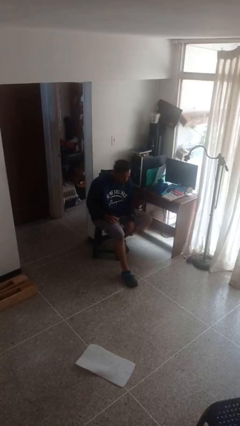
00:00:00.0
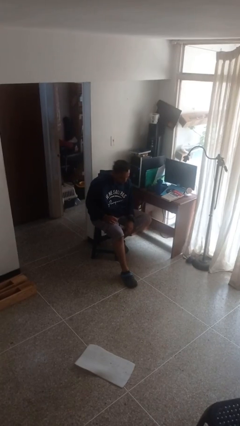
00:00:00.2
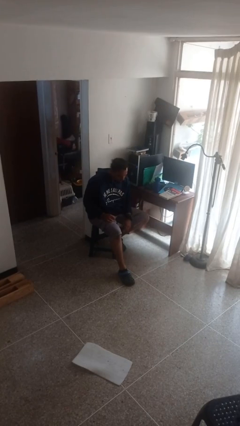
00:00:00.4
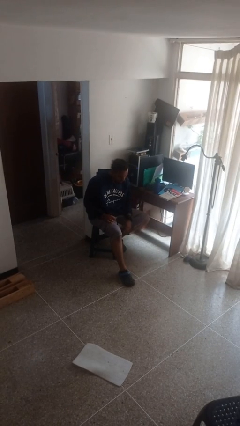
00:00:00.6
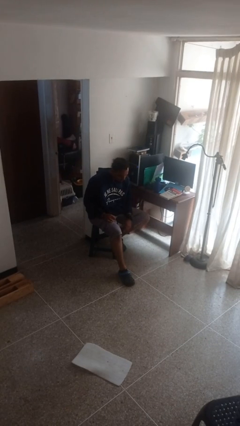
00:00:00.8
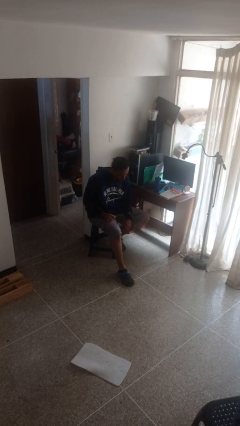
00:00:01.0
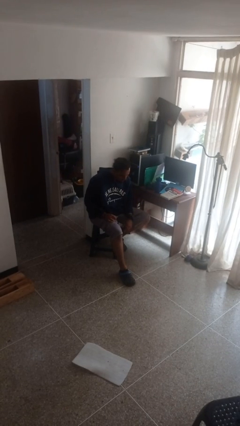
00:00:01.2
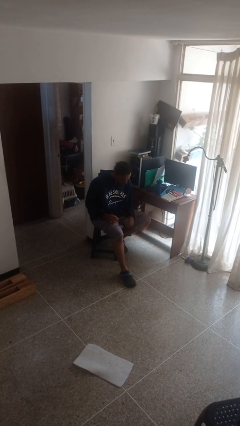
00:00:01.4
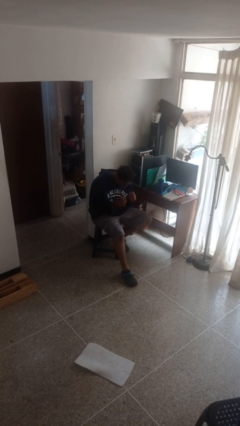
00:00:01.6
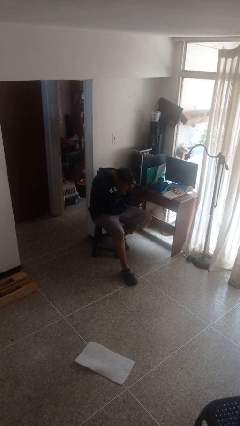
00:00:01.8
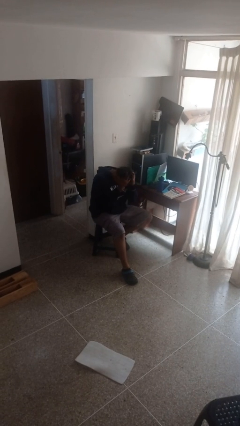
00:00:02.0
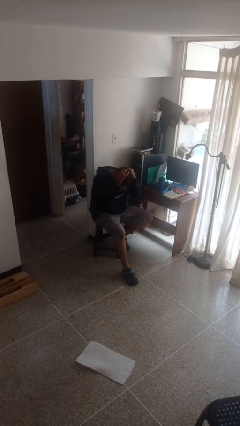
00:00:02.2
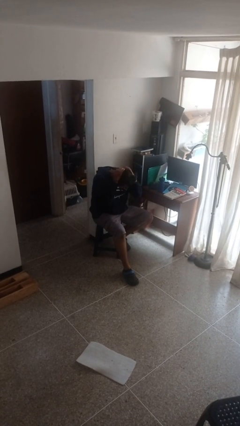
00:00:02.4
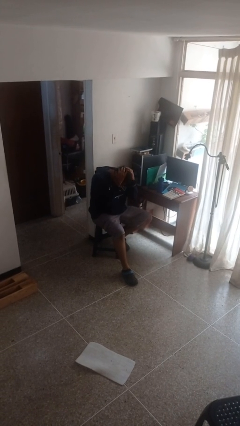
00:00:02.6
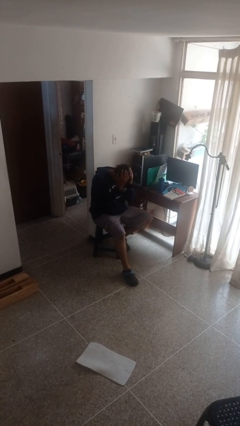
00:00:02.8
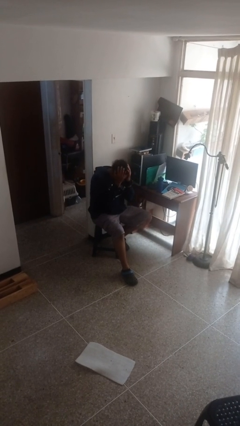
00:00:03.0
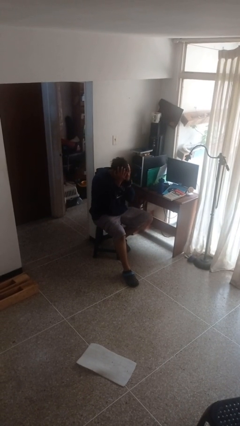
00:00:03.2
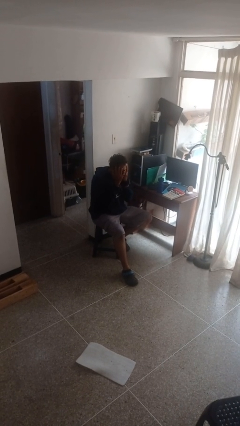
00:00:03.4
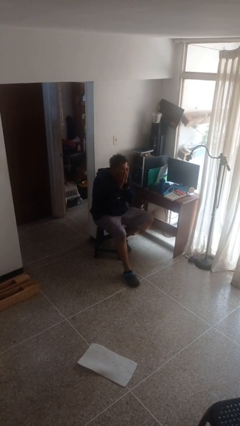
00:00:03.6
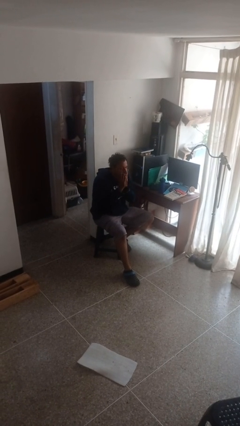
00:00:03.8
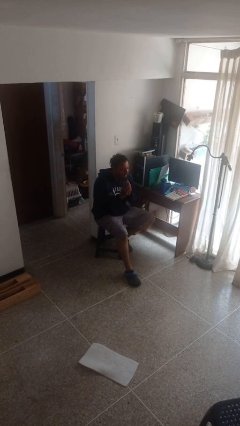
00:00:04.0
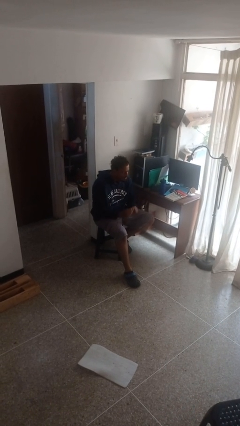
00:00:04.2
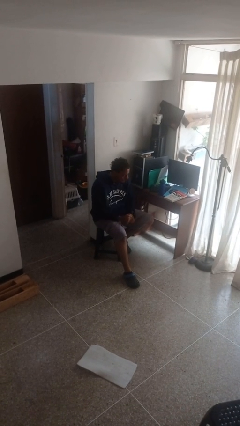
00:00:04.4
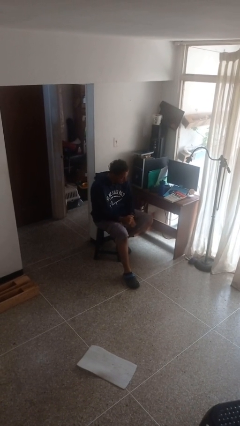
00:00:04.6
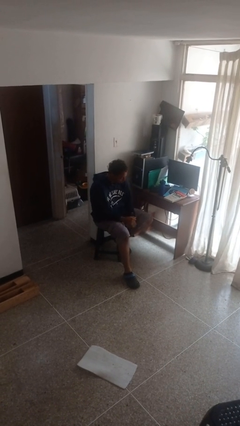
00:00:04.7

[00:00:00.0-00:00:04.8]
person scratches face

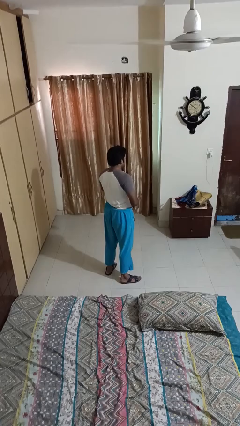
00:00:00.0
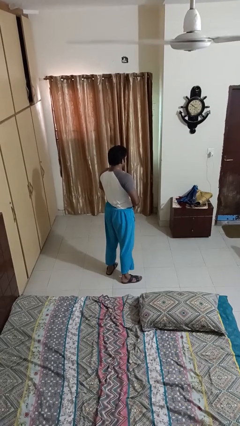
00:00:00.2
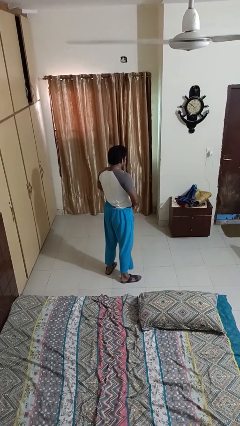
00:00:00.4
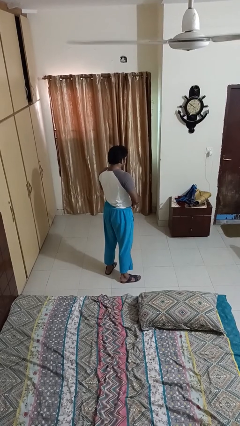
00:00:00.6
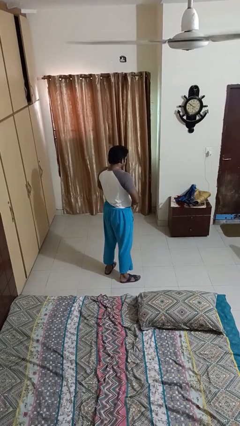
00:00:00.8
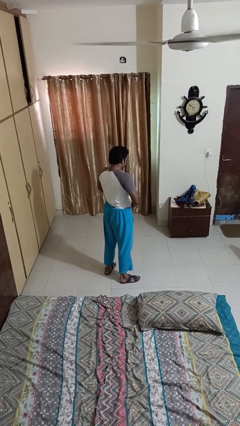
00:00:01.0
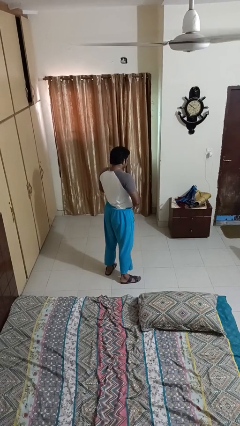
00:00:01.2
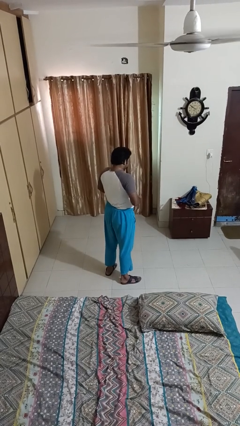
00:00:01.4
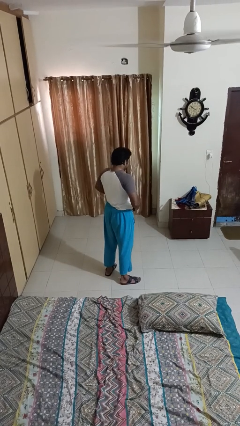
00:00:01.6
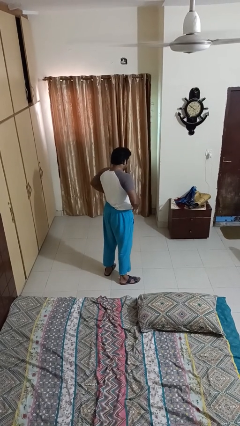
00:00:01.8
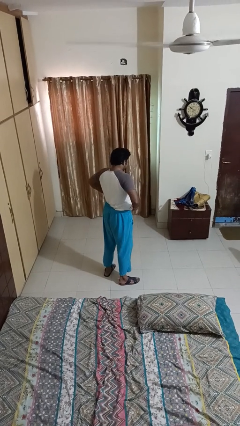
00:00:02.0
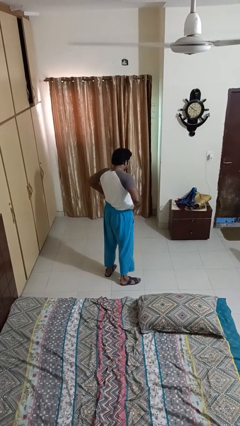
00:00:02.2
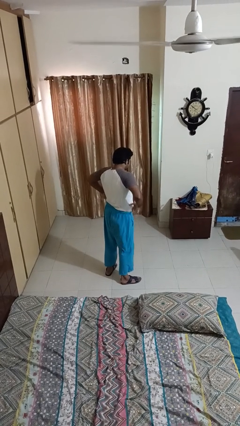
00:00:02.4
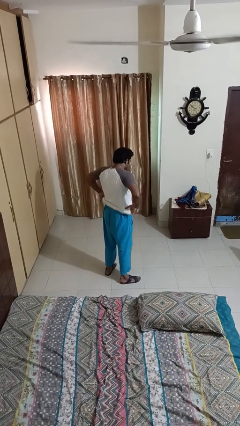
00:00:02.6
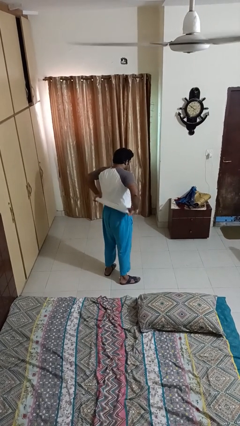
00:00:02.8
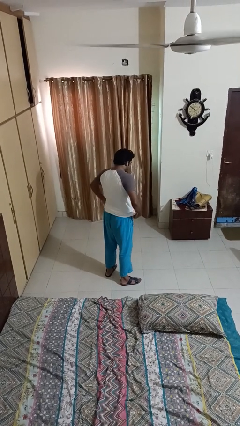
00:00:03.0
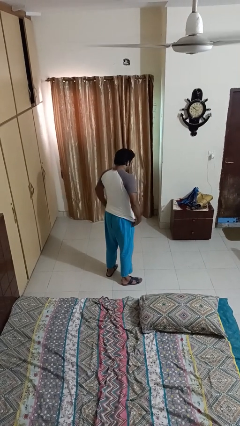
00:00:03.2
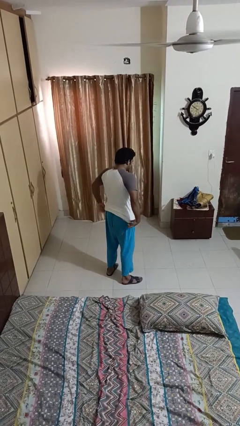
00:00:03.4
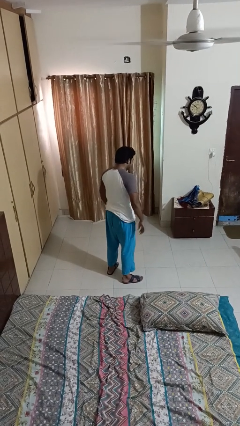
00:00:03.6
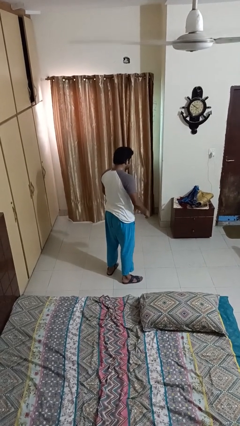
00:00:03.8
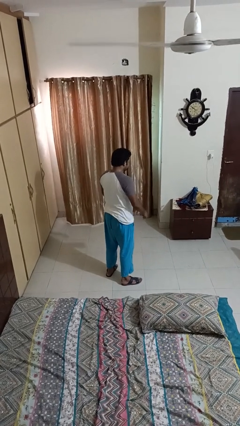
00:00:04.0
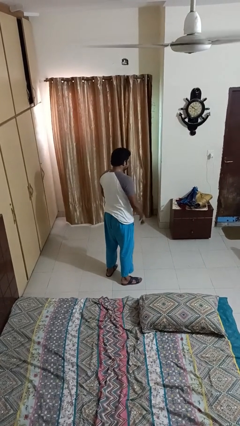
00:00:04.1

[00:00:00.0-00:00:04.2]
person untucks shirt

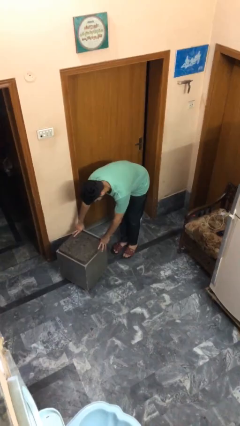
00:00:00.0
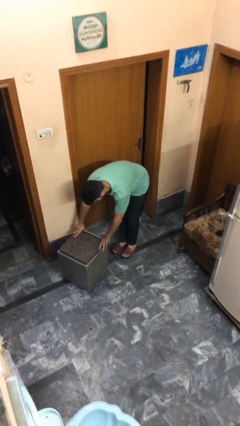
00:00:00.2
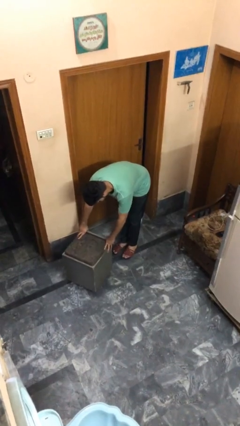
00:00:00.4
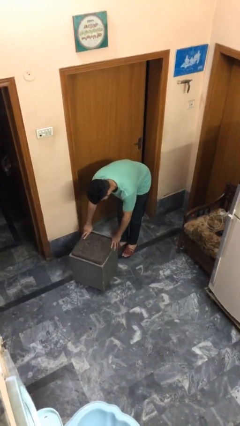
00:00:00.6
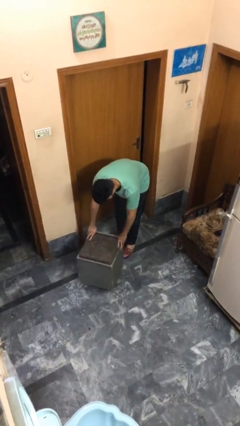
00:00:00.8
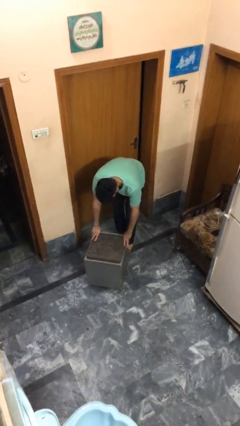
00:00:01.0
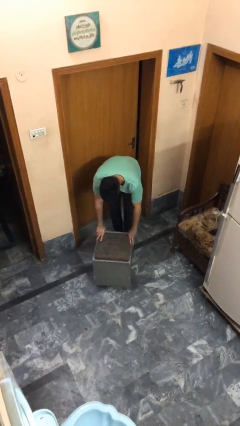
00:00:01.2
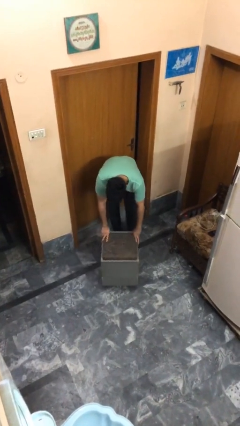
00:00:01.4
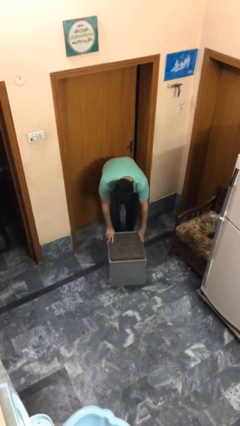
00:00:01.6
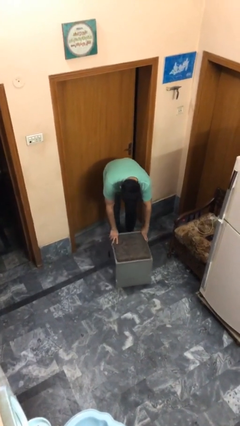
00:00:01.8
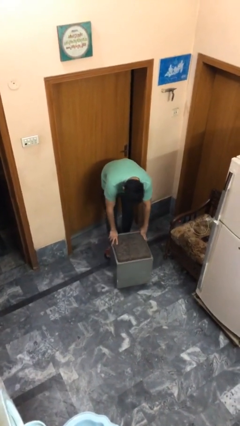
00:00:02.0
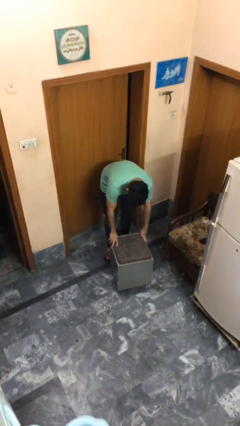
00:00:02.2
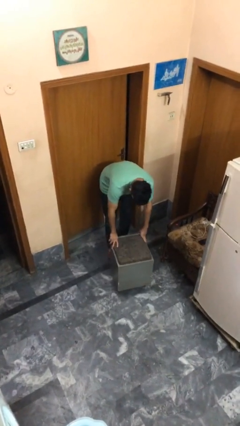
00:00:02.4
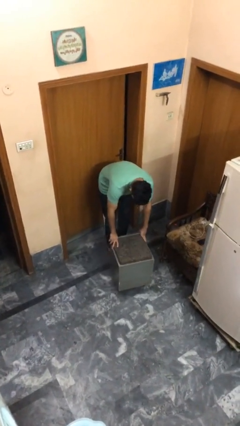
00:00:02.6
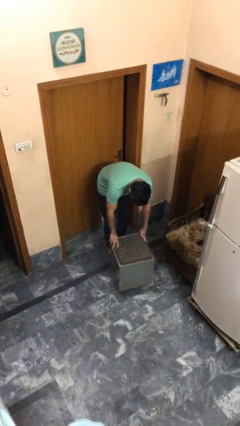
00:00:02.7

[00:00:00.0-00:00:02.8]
person pulls wheeled cart

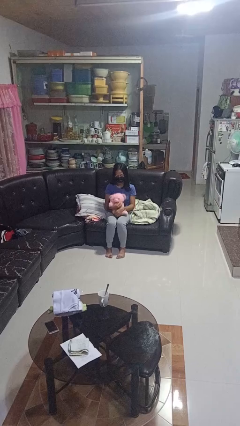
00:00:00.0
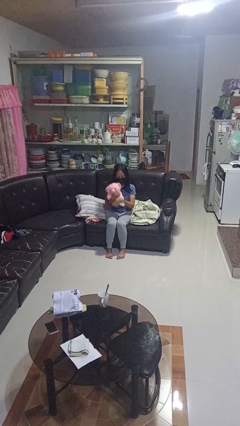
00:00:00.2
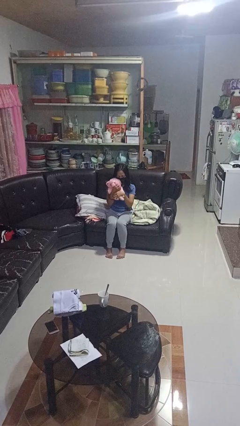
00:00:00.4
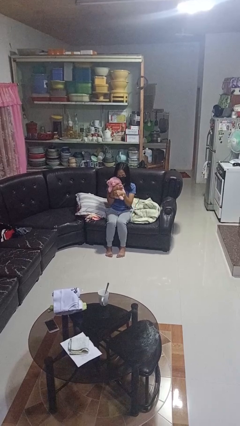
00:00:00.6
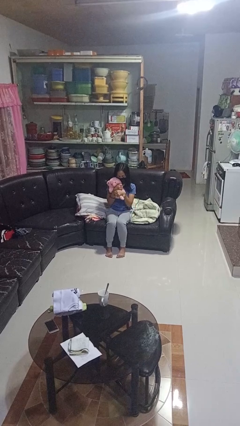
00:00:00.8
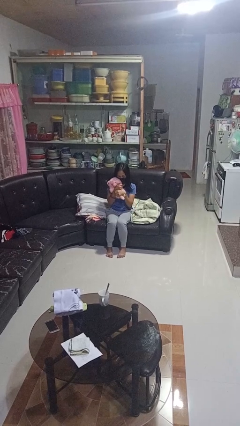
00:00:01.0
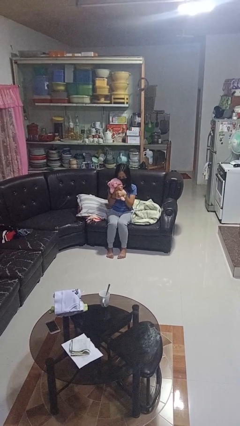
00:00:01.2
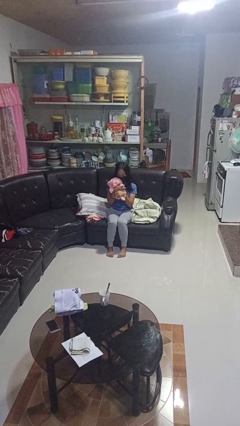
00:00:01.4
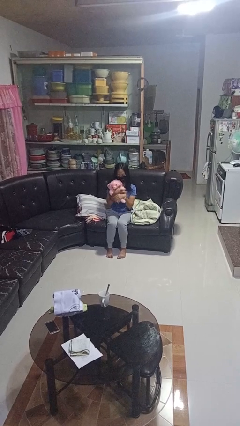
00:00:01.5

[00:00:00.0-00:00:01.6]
person hugs stuffed animal

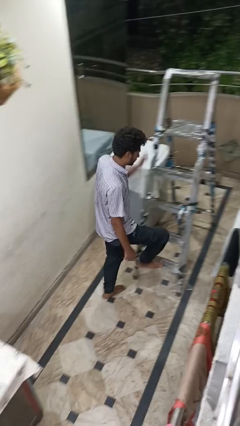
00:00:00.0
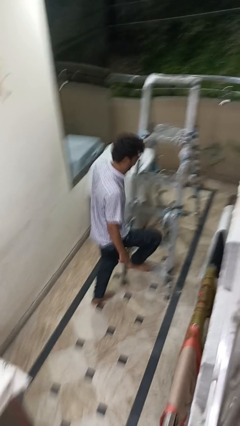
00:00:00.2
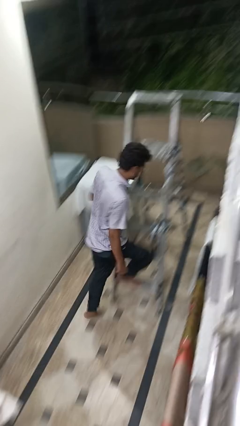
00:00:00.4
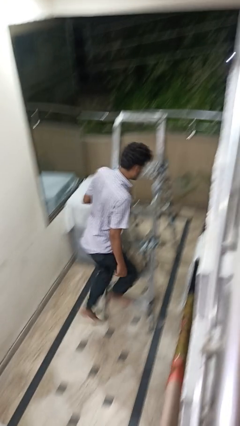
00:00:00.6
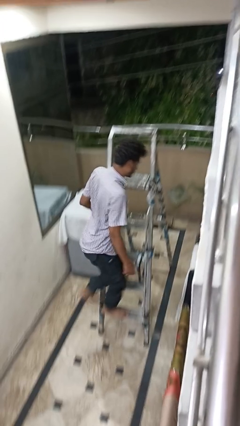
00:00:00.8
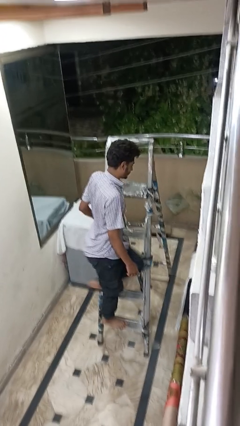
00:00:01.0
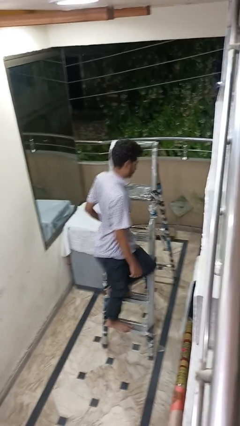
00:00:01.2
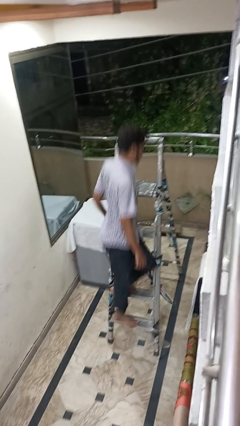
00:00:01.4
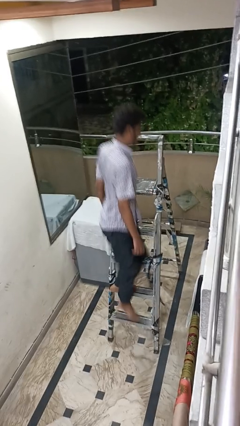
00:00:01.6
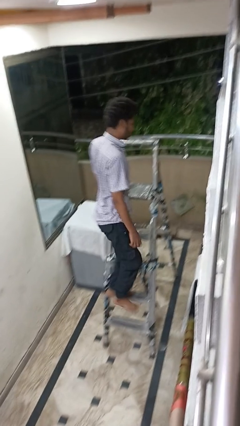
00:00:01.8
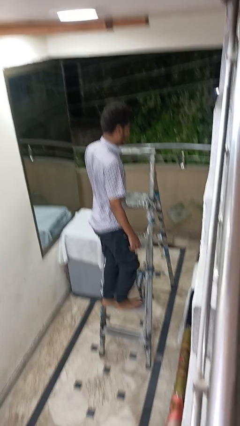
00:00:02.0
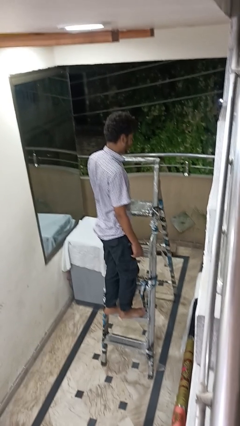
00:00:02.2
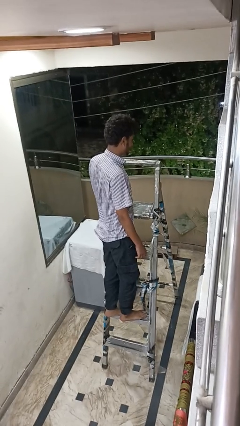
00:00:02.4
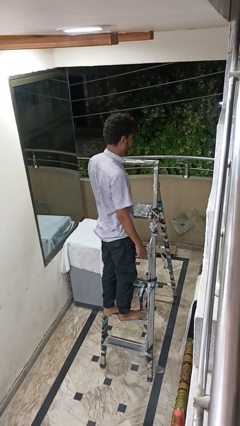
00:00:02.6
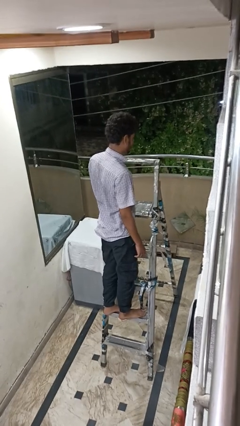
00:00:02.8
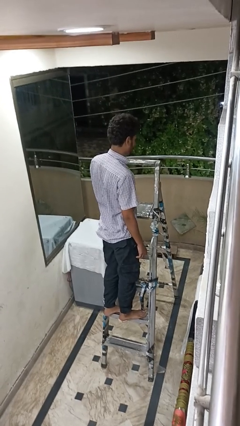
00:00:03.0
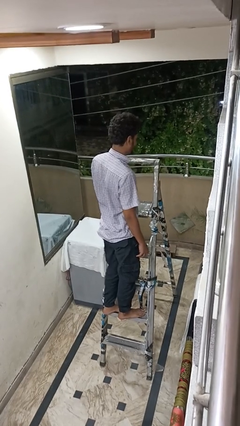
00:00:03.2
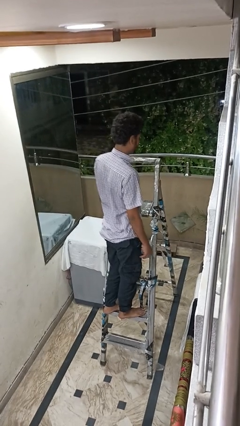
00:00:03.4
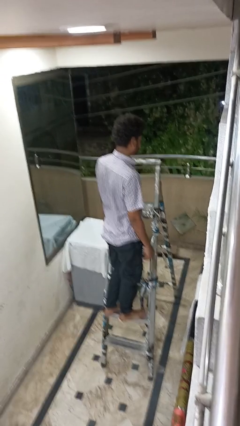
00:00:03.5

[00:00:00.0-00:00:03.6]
person climbs up ladder

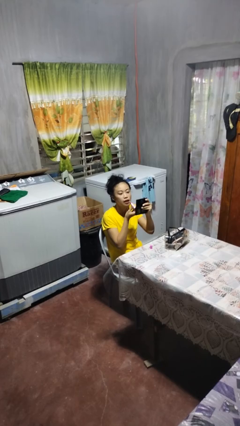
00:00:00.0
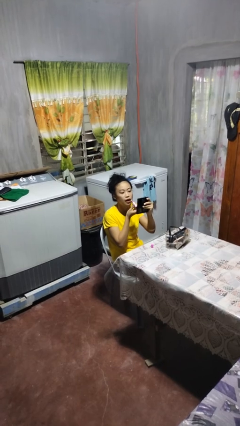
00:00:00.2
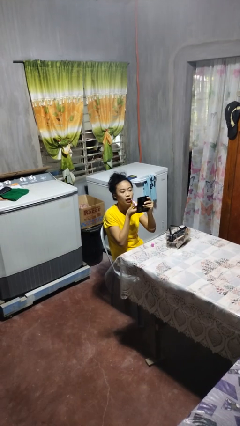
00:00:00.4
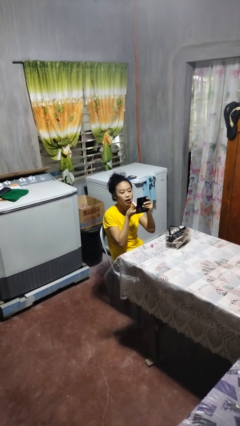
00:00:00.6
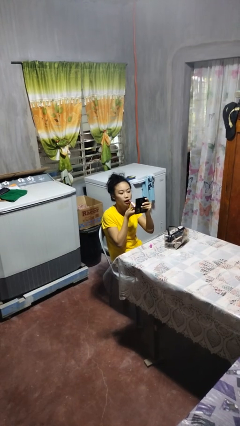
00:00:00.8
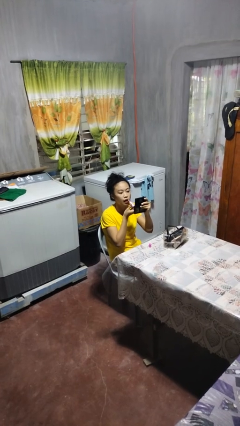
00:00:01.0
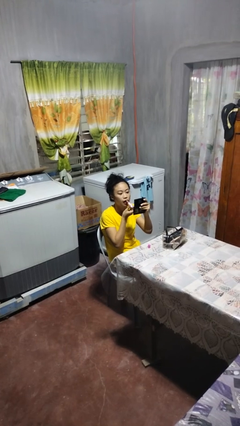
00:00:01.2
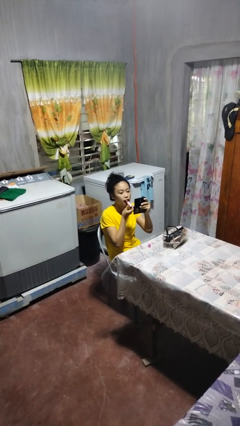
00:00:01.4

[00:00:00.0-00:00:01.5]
person applies lip makeup
